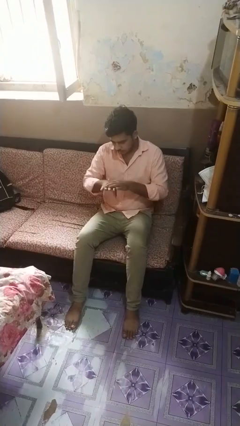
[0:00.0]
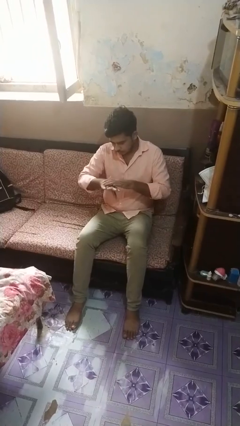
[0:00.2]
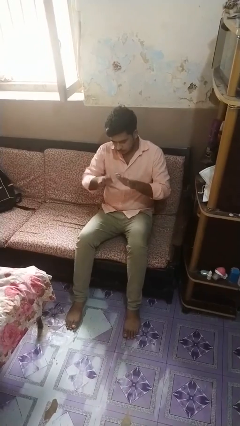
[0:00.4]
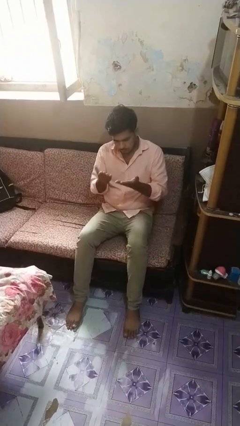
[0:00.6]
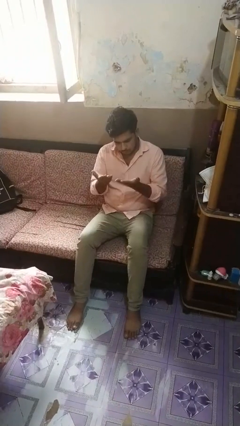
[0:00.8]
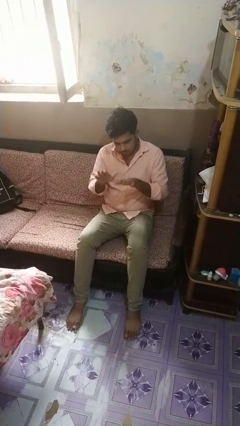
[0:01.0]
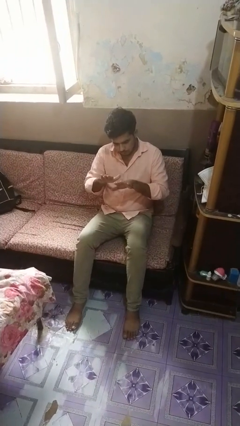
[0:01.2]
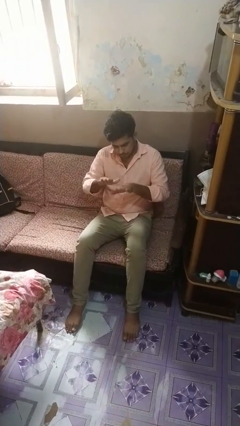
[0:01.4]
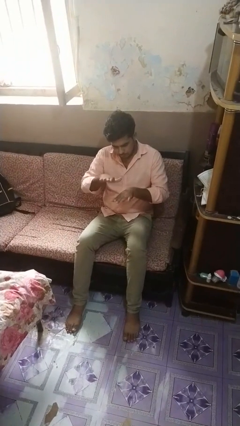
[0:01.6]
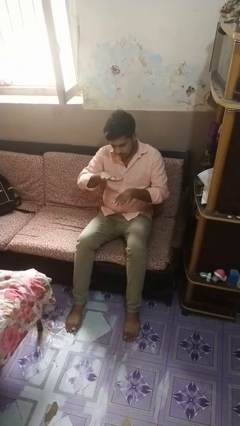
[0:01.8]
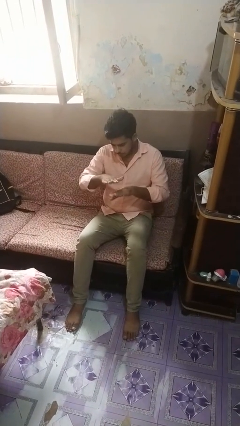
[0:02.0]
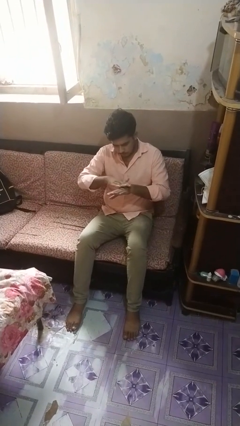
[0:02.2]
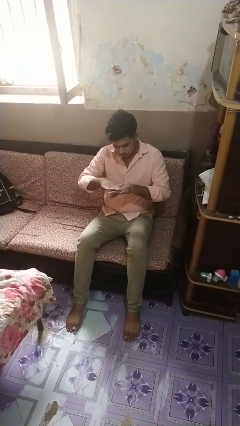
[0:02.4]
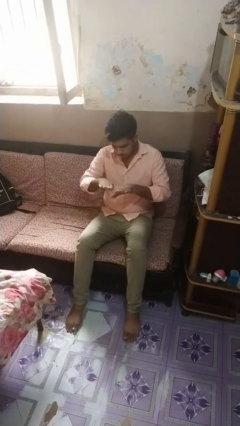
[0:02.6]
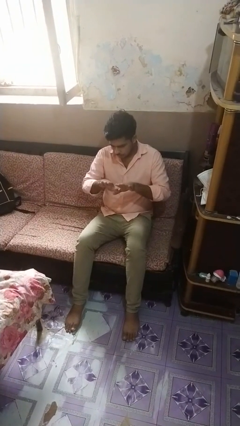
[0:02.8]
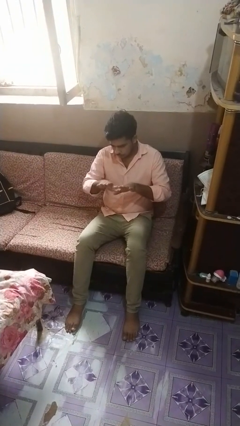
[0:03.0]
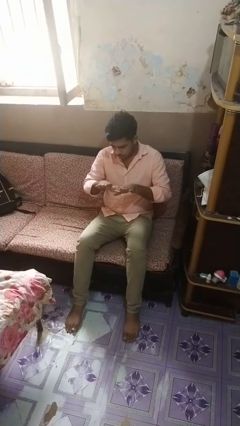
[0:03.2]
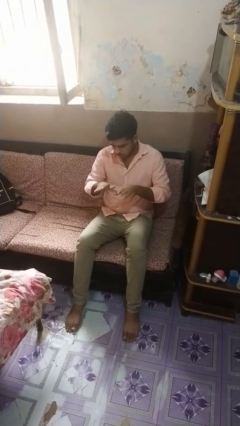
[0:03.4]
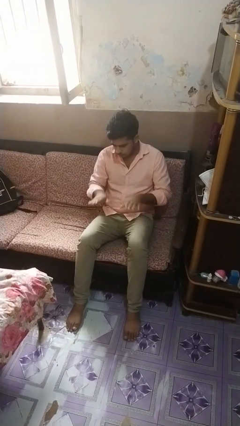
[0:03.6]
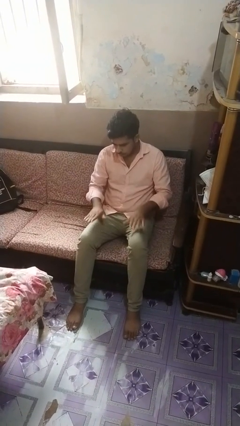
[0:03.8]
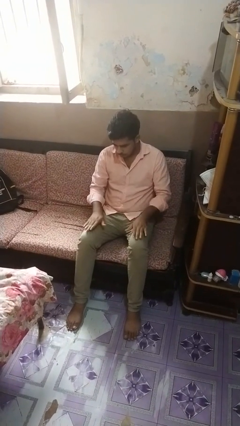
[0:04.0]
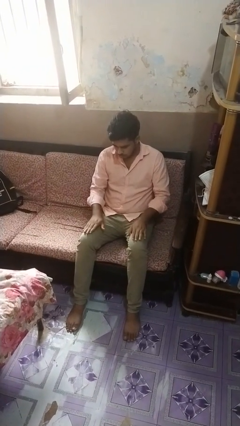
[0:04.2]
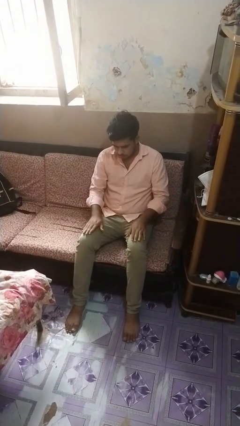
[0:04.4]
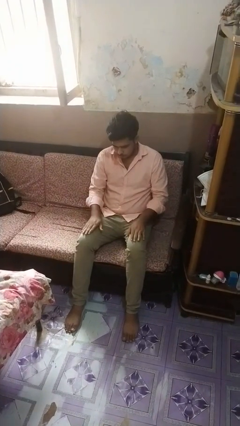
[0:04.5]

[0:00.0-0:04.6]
person looks at hands in lap

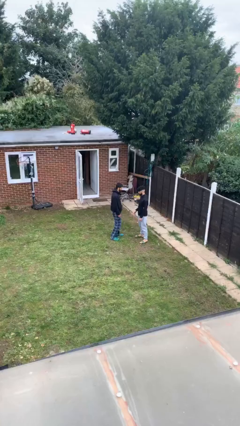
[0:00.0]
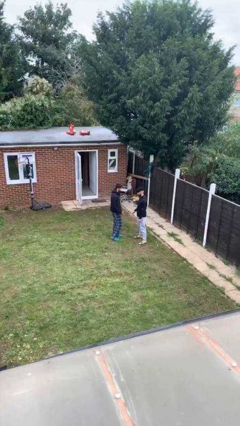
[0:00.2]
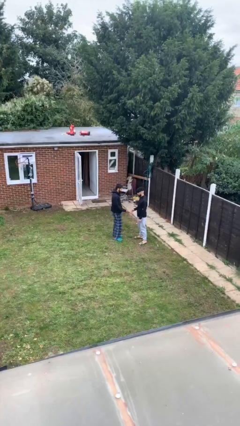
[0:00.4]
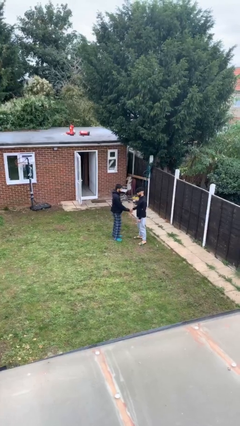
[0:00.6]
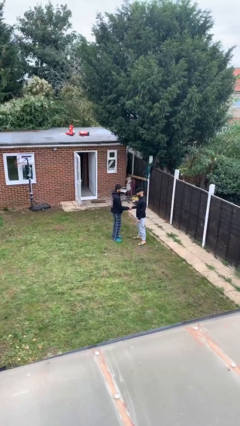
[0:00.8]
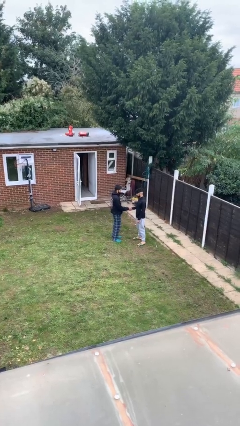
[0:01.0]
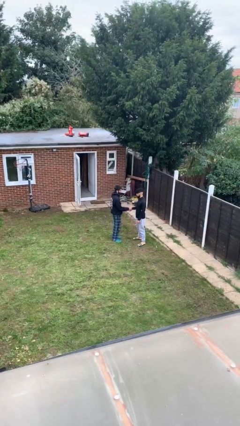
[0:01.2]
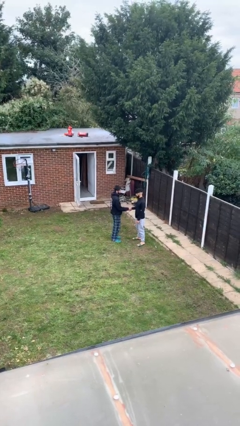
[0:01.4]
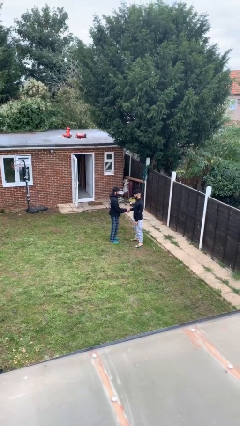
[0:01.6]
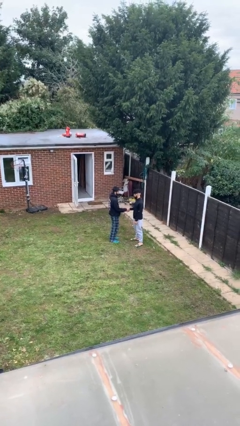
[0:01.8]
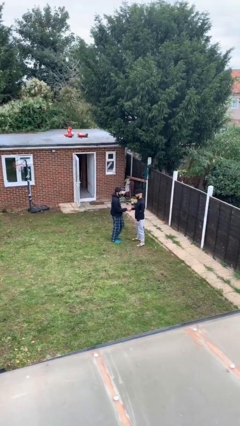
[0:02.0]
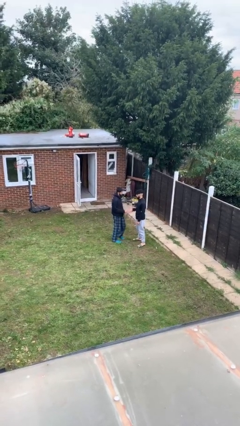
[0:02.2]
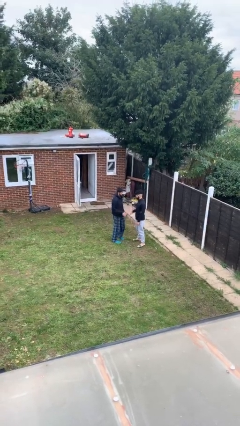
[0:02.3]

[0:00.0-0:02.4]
person shakes hand

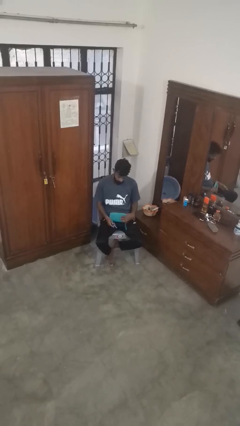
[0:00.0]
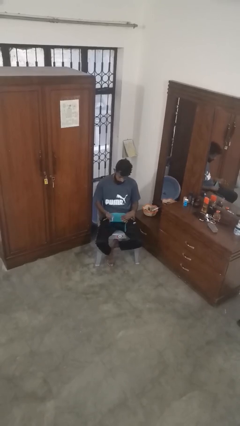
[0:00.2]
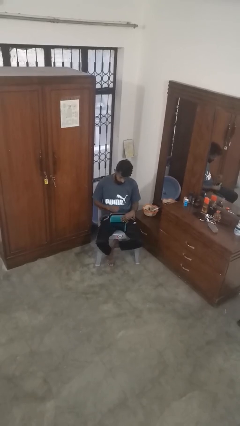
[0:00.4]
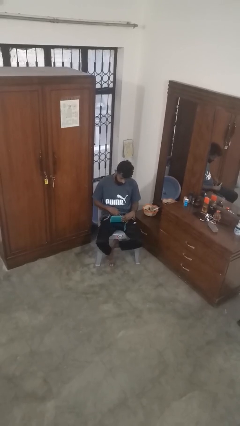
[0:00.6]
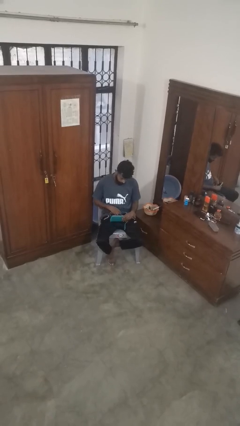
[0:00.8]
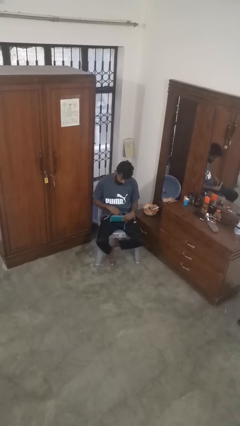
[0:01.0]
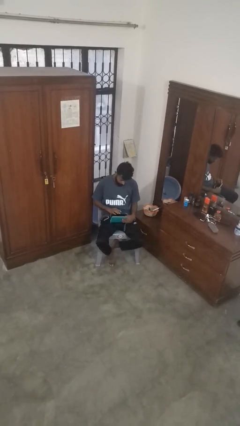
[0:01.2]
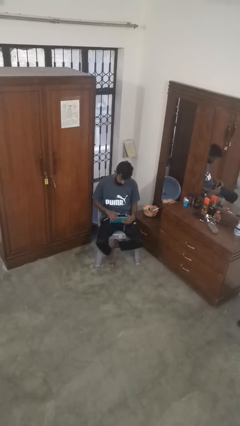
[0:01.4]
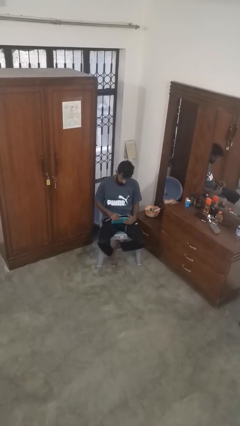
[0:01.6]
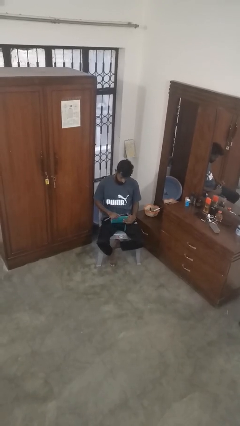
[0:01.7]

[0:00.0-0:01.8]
person puts object into purse

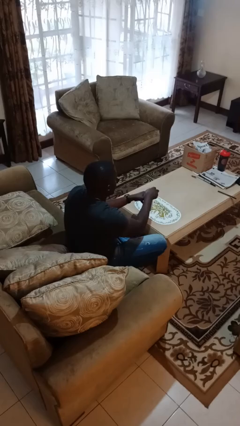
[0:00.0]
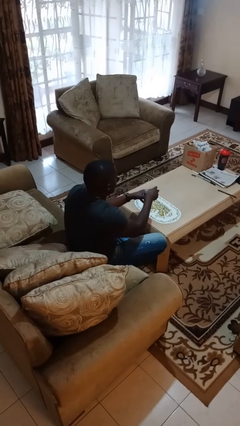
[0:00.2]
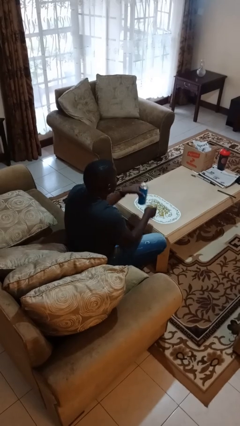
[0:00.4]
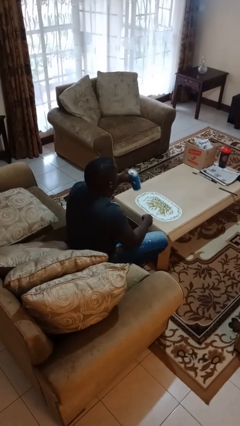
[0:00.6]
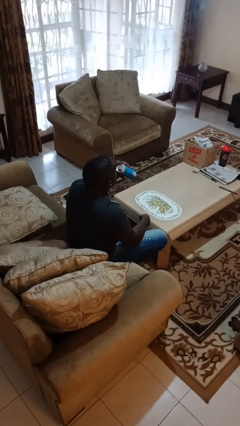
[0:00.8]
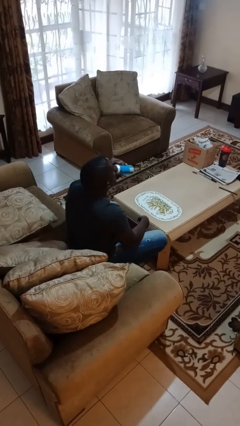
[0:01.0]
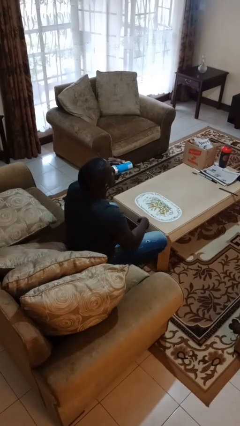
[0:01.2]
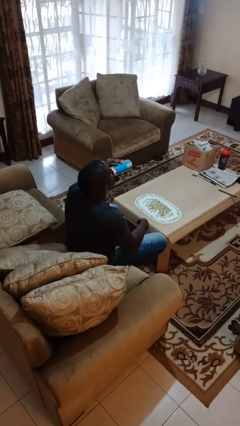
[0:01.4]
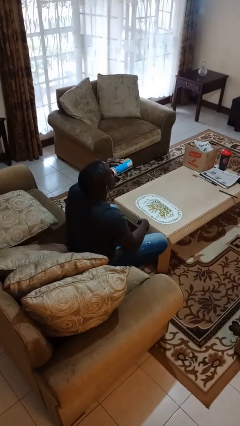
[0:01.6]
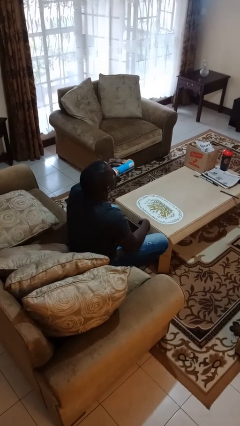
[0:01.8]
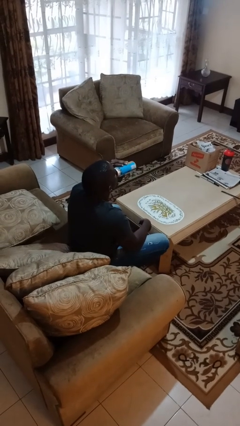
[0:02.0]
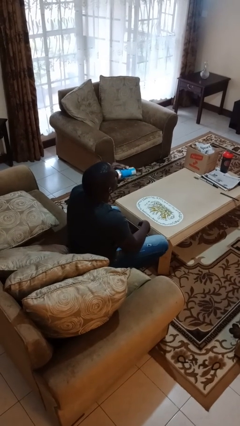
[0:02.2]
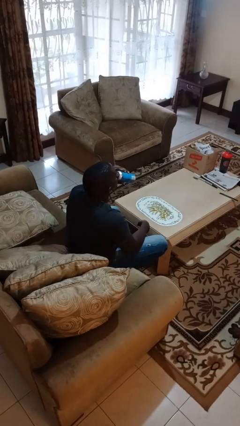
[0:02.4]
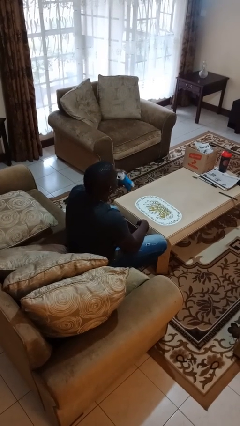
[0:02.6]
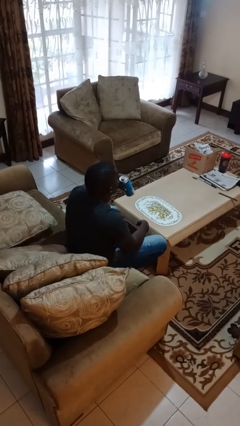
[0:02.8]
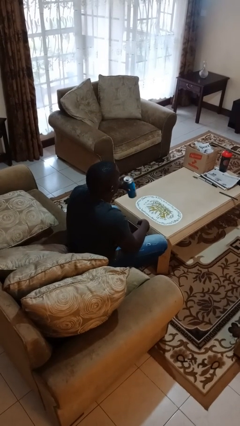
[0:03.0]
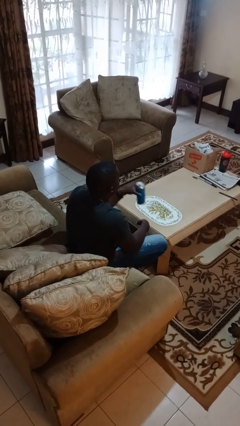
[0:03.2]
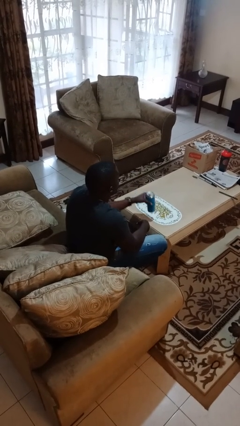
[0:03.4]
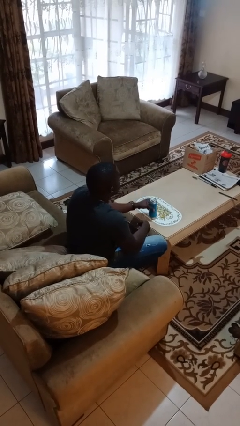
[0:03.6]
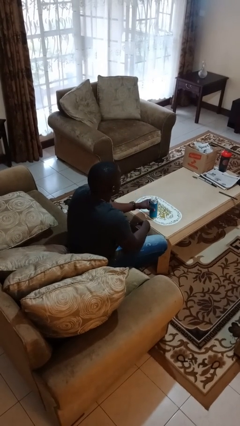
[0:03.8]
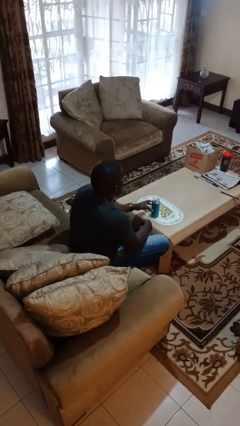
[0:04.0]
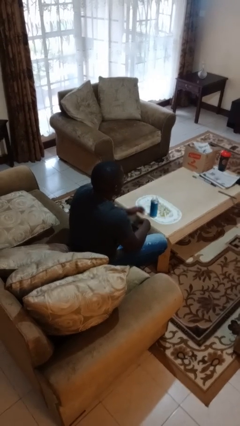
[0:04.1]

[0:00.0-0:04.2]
person drinks from beverage can

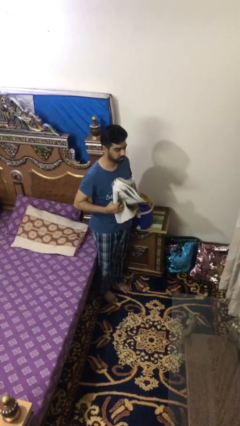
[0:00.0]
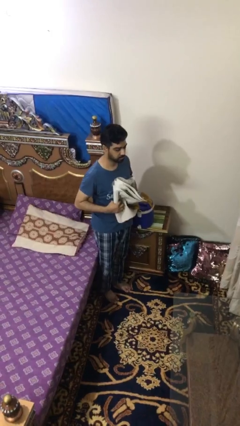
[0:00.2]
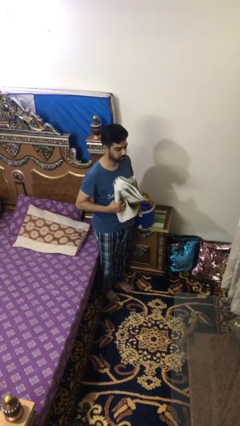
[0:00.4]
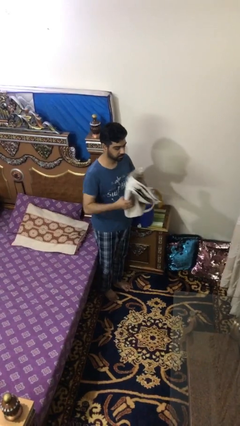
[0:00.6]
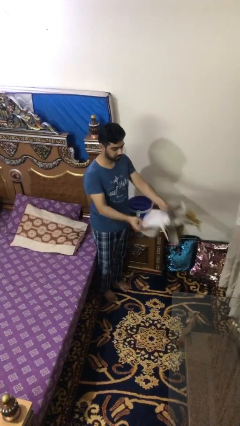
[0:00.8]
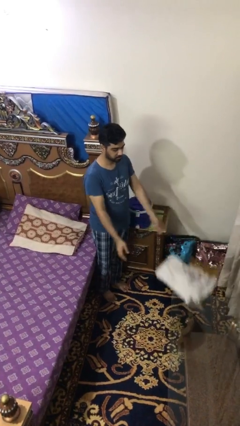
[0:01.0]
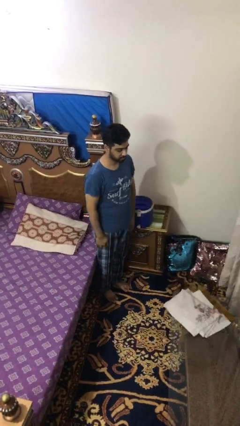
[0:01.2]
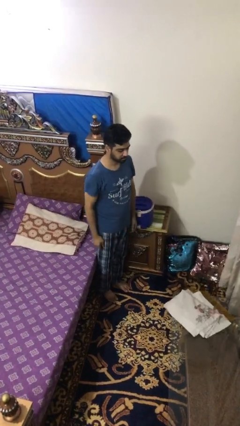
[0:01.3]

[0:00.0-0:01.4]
person throws object on table

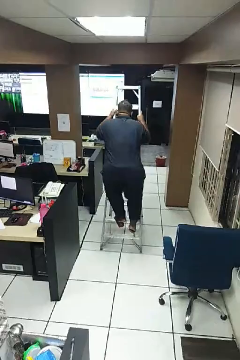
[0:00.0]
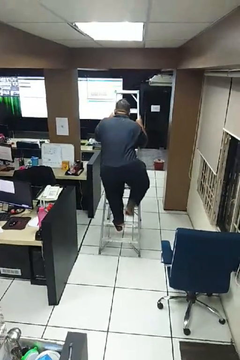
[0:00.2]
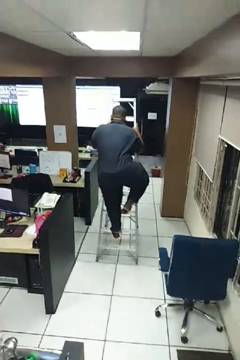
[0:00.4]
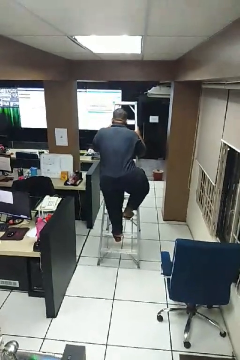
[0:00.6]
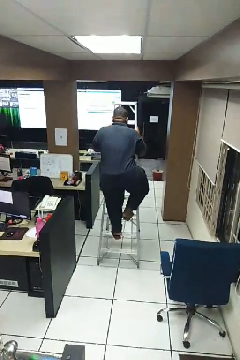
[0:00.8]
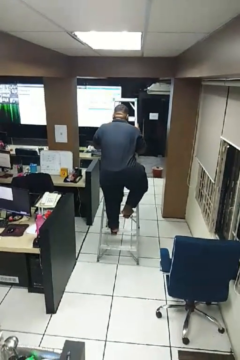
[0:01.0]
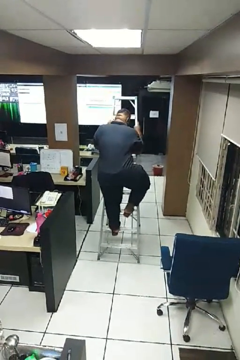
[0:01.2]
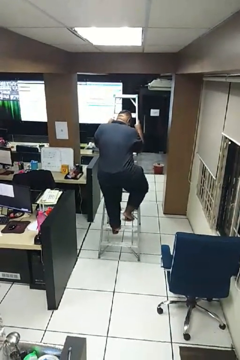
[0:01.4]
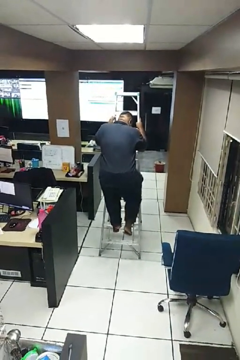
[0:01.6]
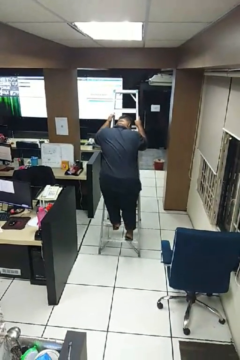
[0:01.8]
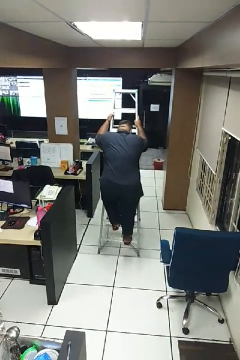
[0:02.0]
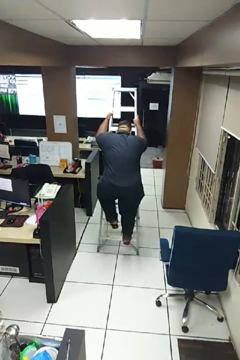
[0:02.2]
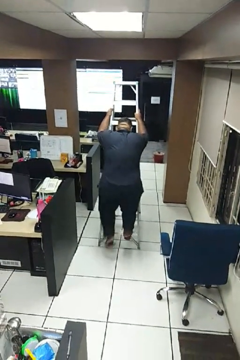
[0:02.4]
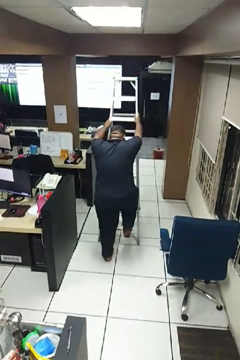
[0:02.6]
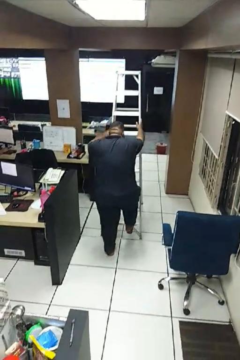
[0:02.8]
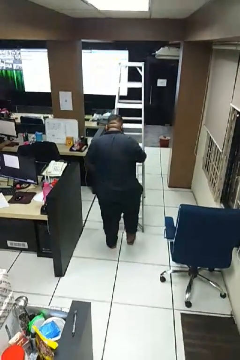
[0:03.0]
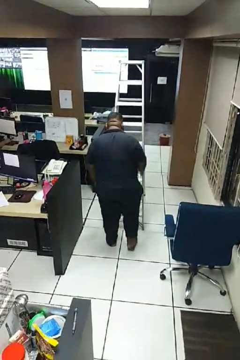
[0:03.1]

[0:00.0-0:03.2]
person climbs down ladder

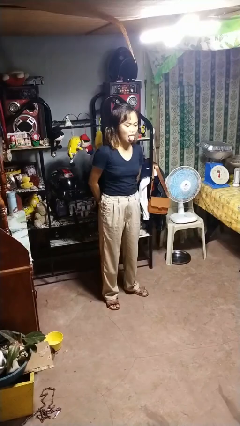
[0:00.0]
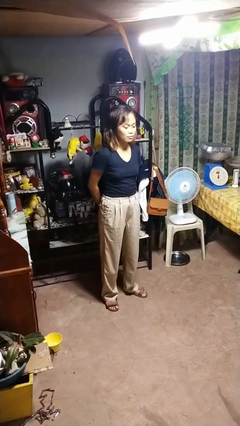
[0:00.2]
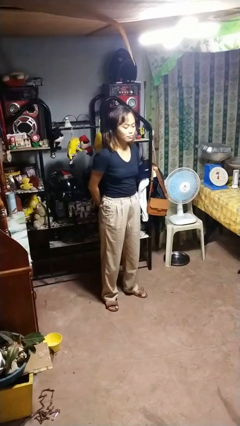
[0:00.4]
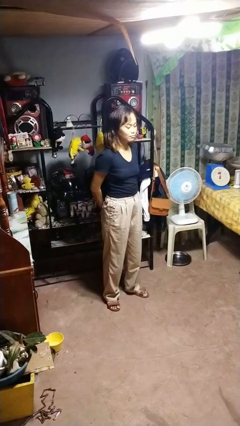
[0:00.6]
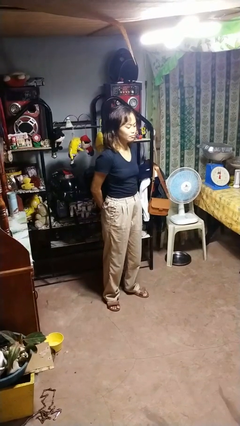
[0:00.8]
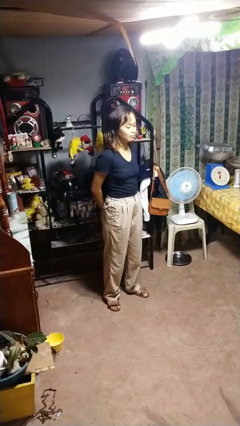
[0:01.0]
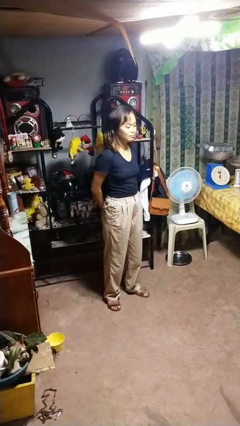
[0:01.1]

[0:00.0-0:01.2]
person sticks out tongue
